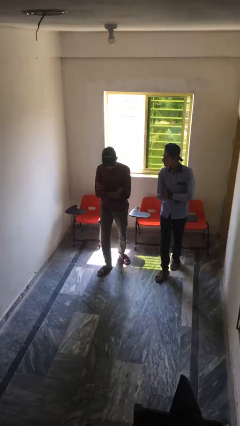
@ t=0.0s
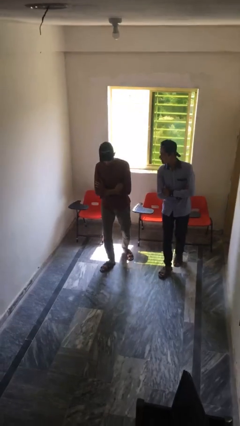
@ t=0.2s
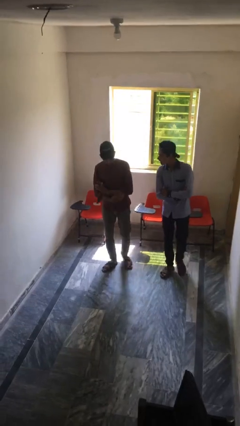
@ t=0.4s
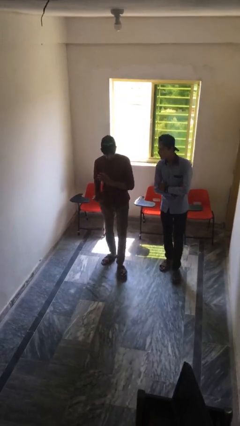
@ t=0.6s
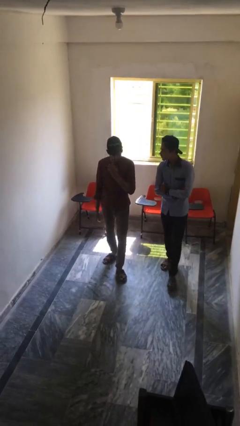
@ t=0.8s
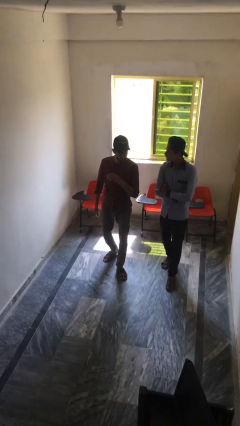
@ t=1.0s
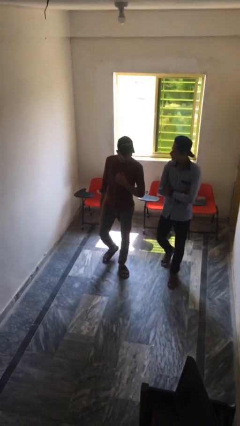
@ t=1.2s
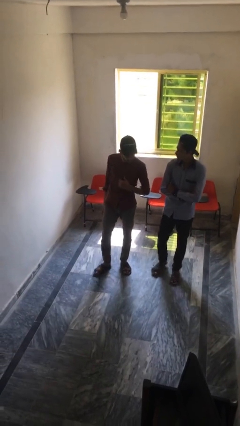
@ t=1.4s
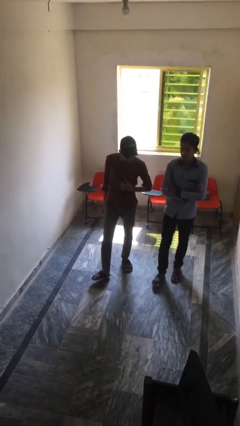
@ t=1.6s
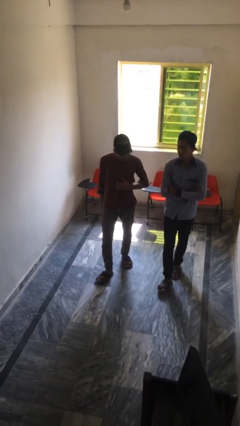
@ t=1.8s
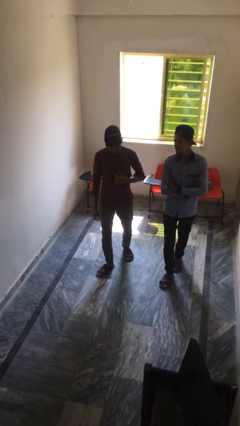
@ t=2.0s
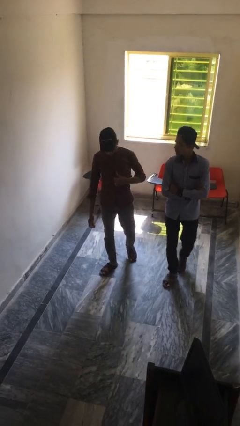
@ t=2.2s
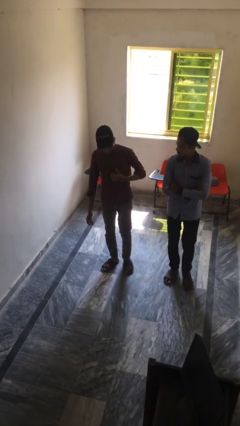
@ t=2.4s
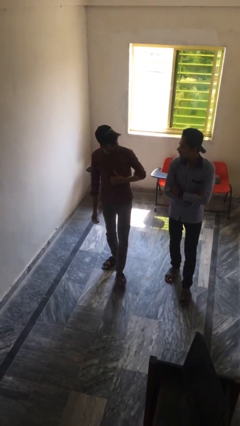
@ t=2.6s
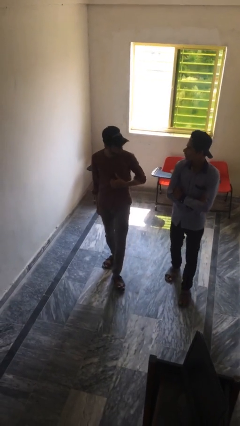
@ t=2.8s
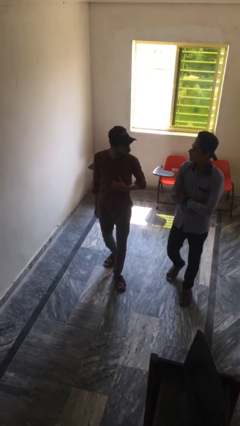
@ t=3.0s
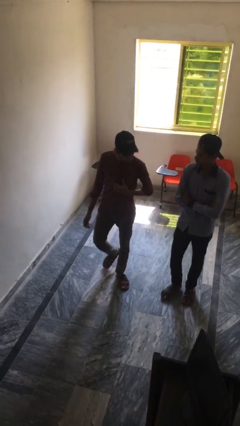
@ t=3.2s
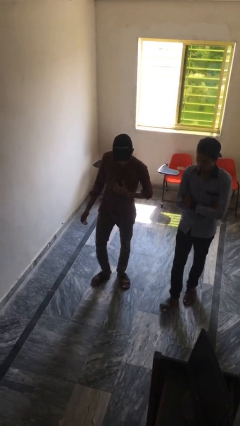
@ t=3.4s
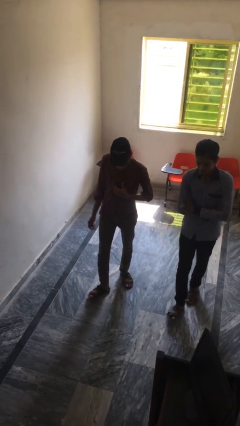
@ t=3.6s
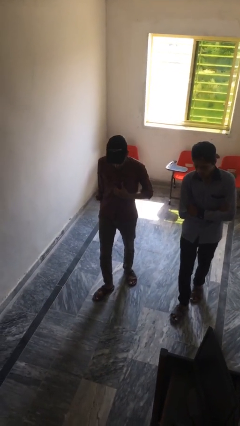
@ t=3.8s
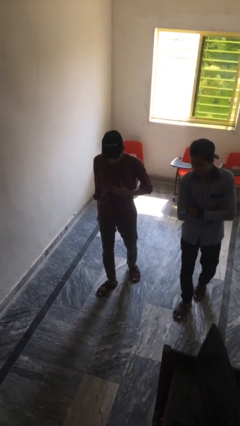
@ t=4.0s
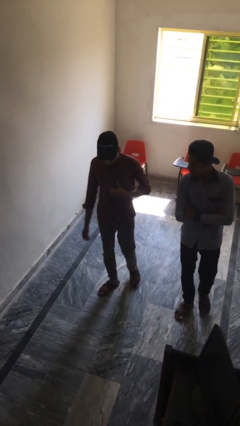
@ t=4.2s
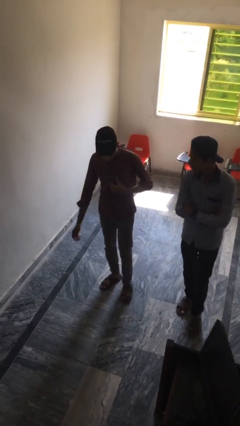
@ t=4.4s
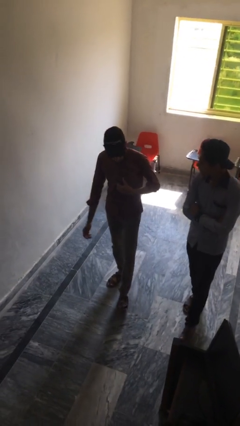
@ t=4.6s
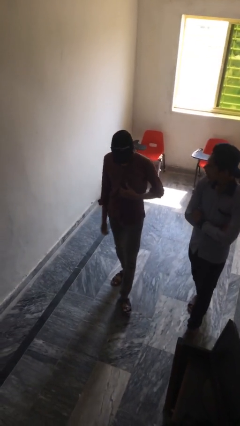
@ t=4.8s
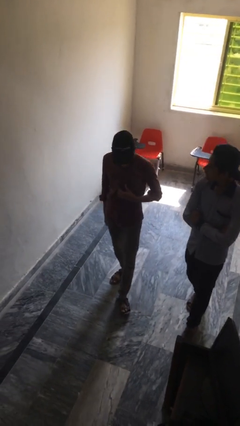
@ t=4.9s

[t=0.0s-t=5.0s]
person talks to person

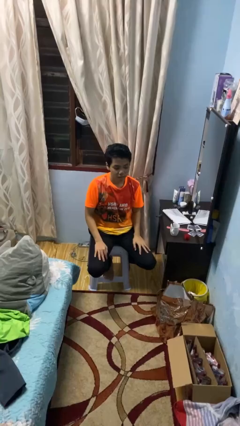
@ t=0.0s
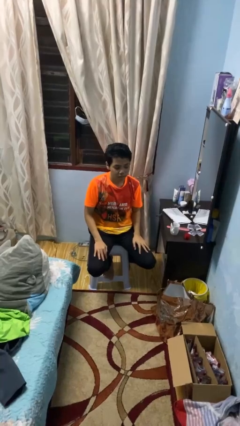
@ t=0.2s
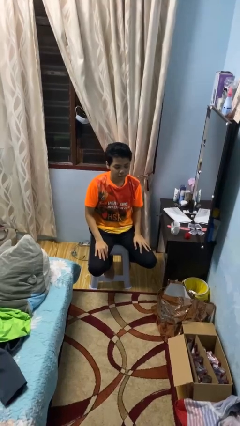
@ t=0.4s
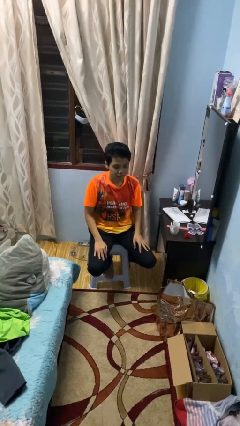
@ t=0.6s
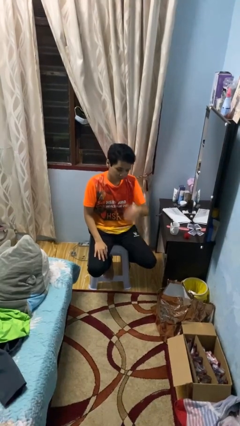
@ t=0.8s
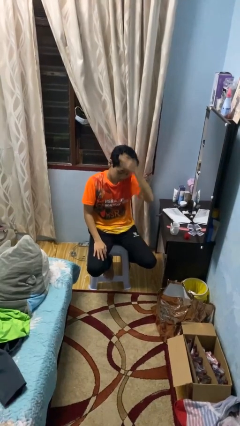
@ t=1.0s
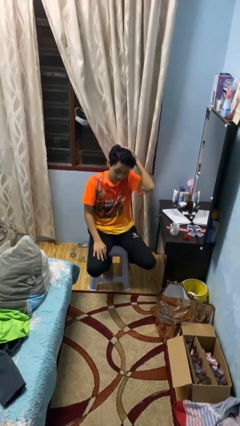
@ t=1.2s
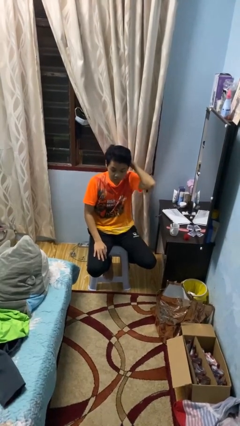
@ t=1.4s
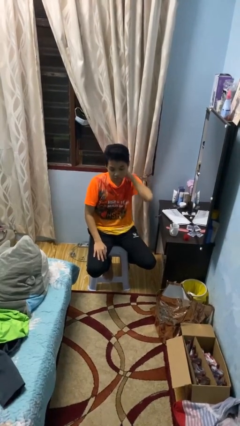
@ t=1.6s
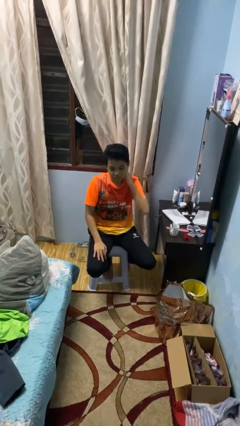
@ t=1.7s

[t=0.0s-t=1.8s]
person strokes hair

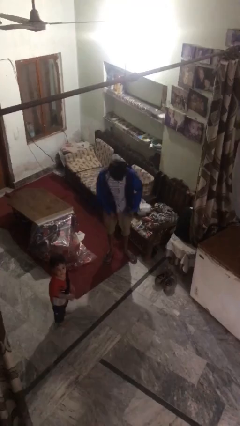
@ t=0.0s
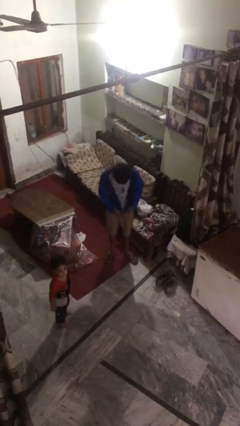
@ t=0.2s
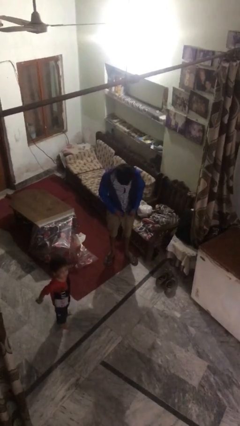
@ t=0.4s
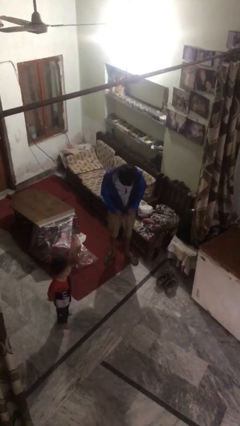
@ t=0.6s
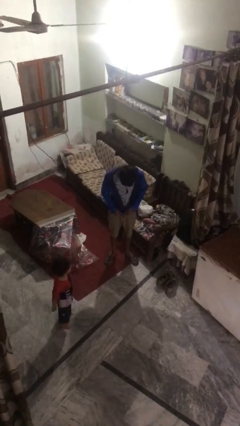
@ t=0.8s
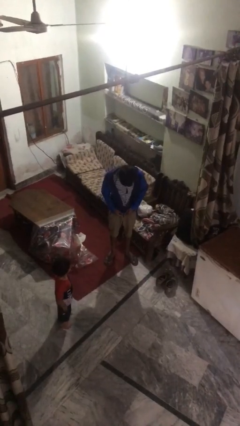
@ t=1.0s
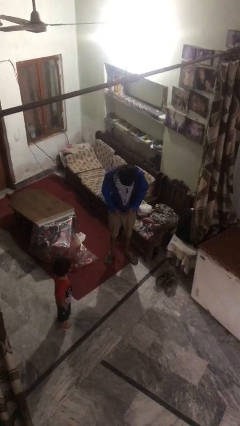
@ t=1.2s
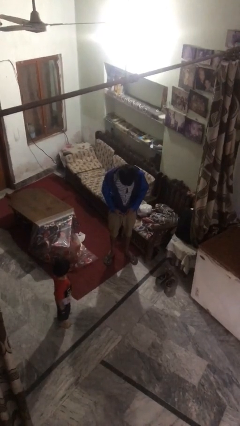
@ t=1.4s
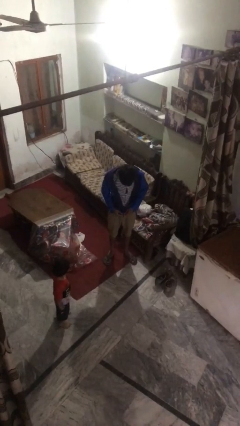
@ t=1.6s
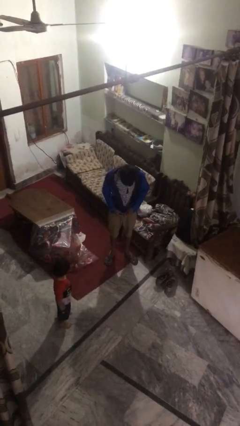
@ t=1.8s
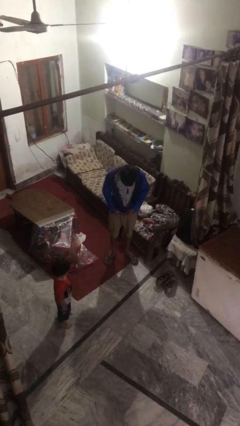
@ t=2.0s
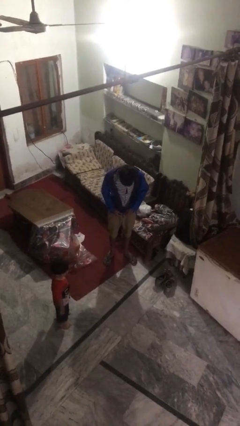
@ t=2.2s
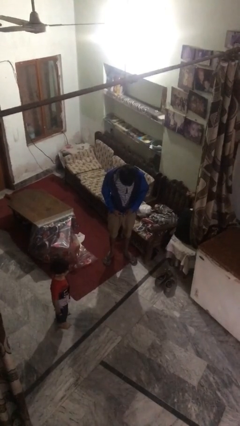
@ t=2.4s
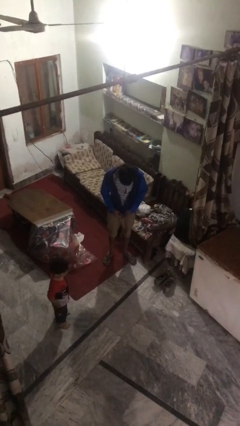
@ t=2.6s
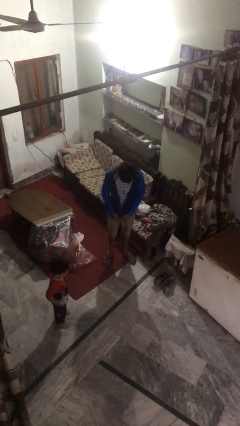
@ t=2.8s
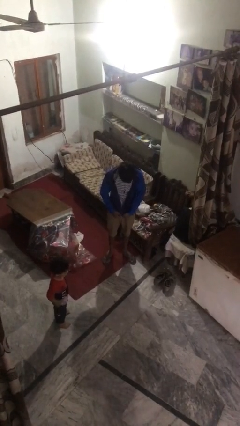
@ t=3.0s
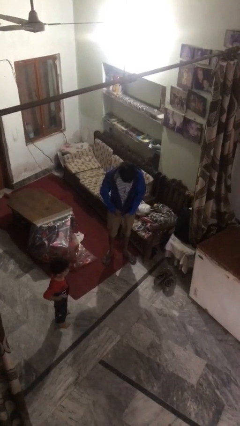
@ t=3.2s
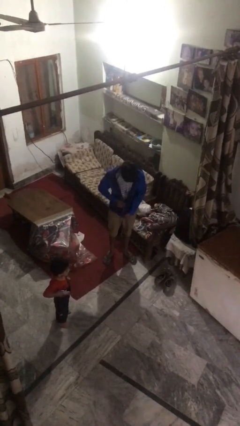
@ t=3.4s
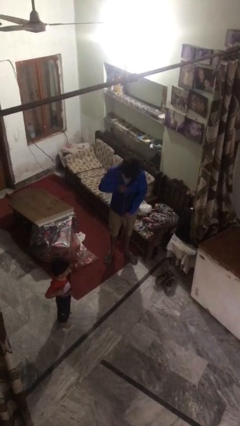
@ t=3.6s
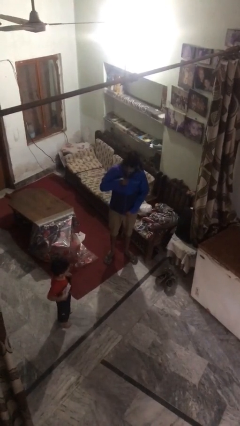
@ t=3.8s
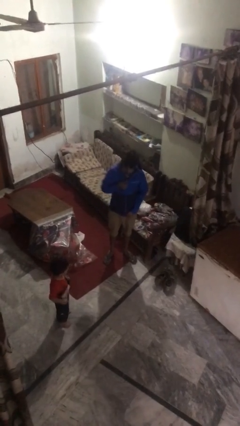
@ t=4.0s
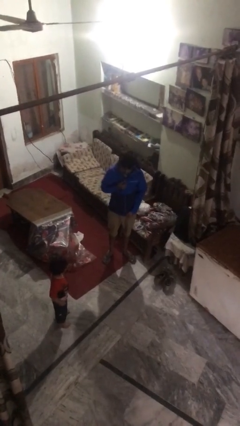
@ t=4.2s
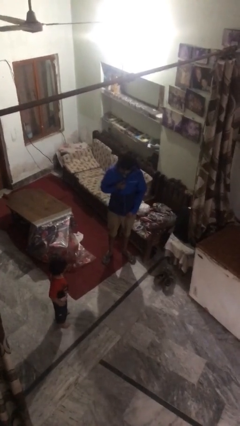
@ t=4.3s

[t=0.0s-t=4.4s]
person zips up jacket

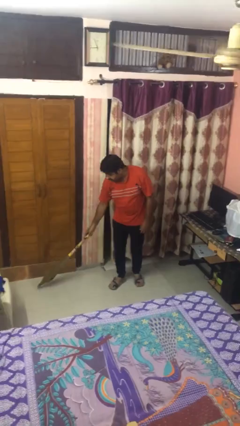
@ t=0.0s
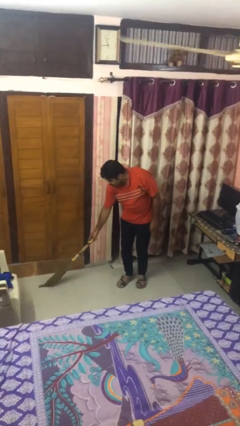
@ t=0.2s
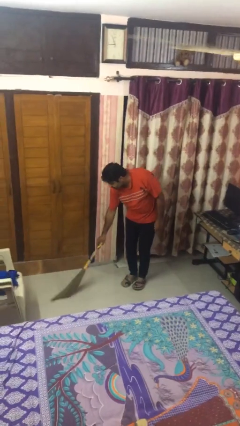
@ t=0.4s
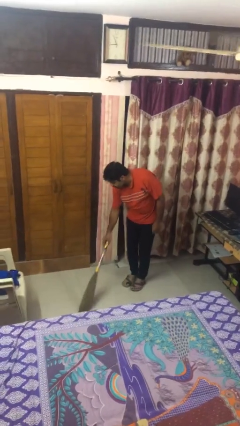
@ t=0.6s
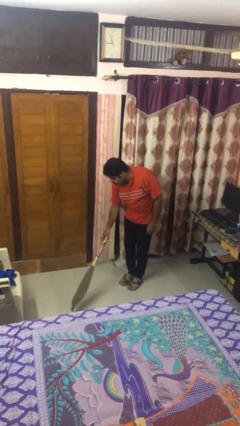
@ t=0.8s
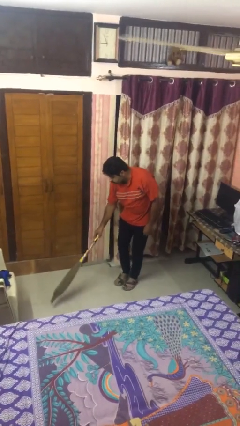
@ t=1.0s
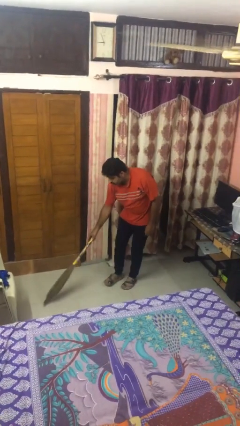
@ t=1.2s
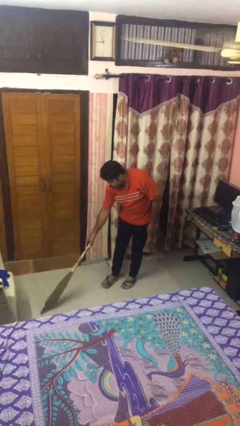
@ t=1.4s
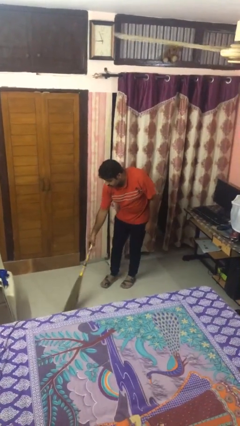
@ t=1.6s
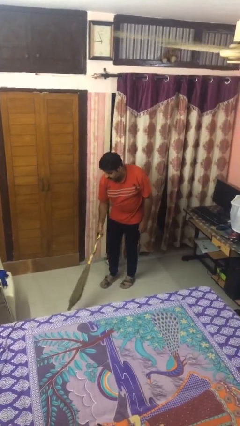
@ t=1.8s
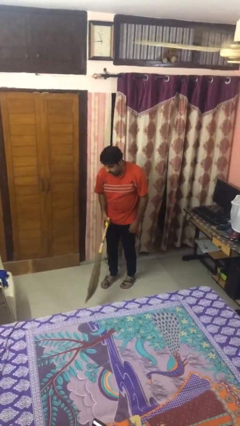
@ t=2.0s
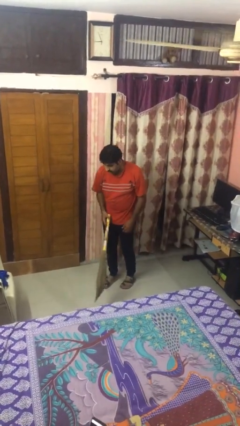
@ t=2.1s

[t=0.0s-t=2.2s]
person sweeps floor

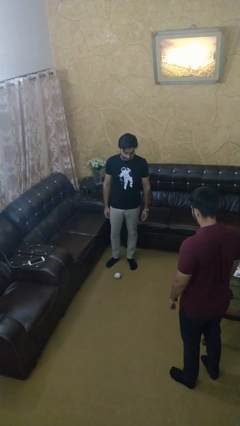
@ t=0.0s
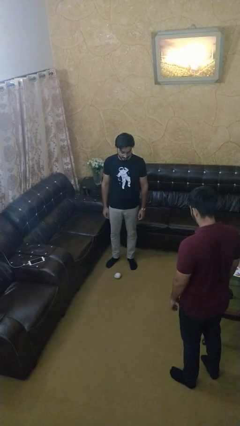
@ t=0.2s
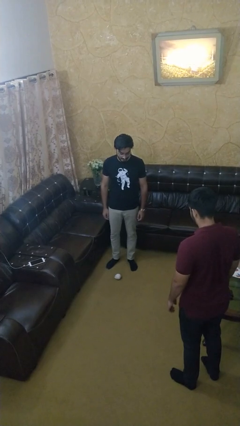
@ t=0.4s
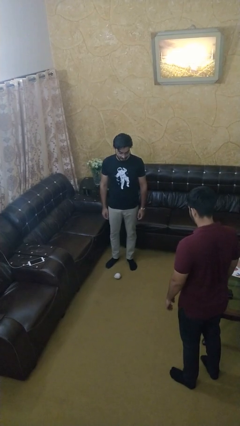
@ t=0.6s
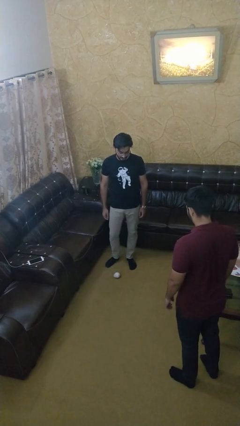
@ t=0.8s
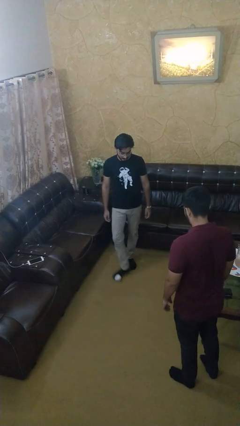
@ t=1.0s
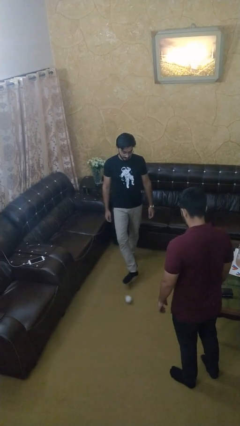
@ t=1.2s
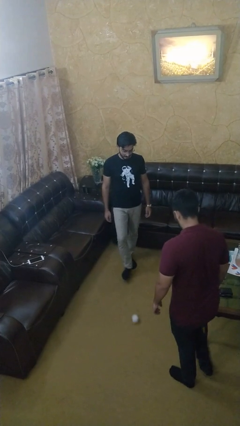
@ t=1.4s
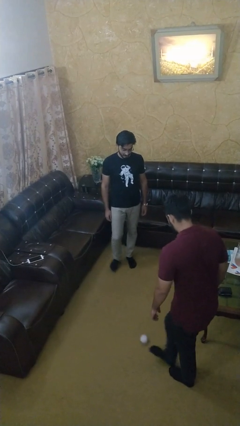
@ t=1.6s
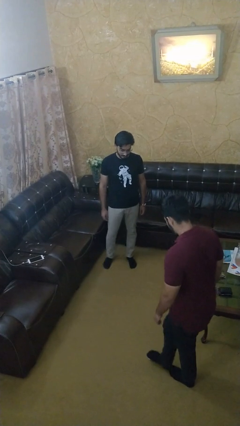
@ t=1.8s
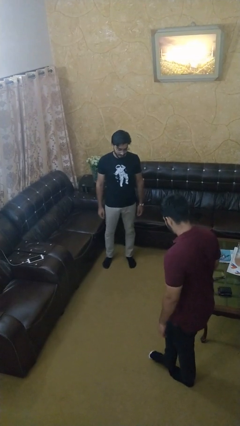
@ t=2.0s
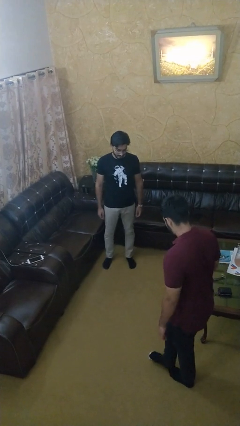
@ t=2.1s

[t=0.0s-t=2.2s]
person kicks object to person

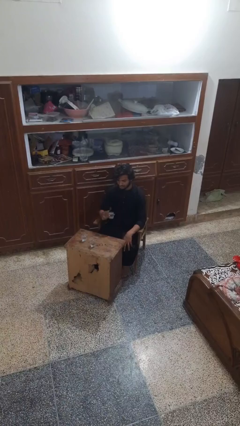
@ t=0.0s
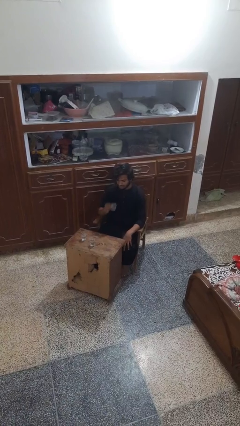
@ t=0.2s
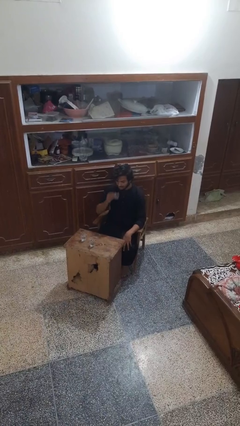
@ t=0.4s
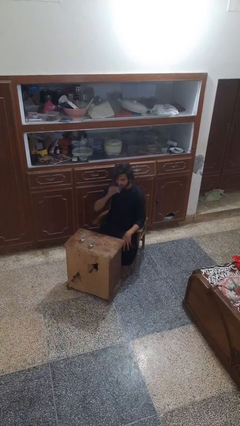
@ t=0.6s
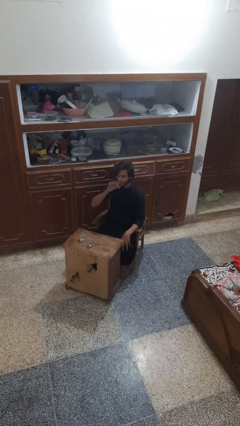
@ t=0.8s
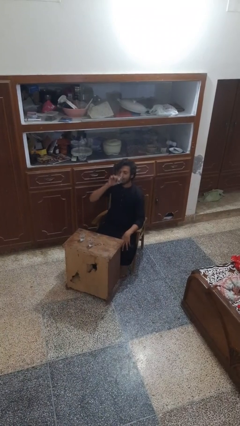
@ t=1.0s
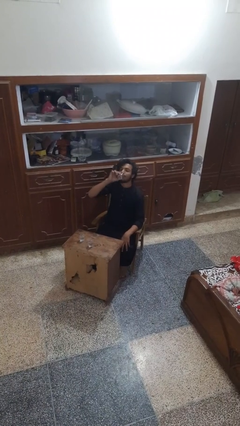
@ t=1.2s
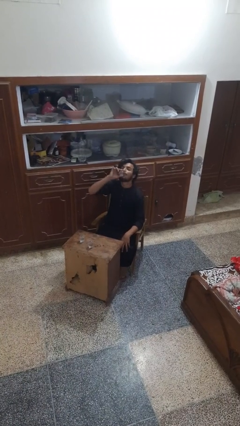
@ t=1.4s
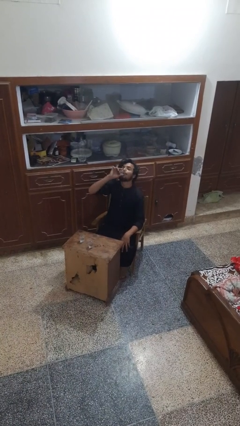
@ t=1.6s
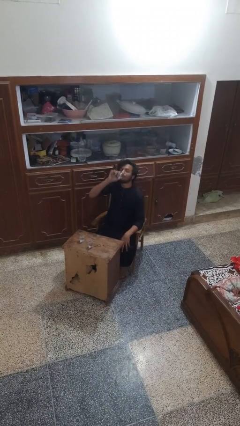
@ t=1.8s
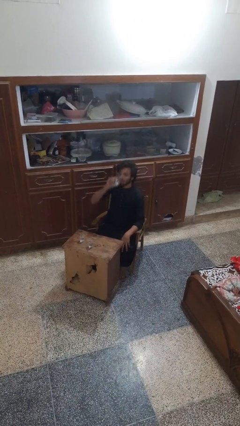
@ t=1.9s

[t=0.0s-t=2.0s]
person drinks from shotglass
